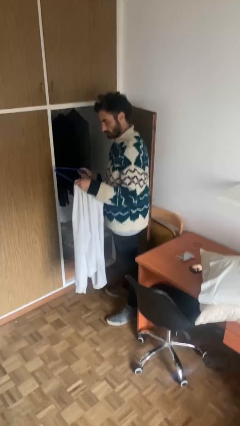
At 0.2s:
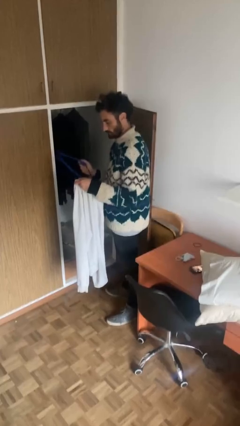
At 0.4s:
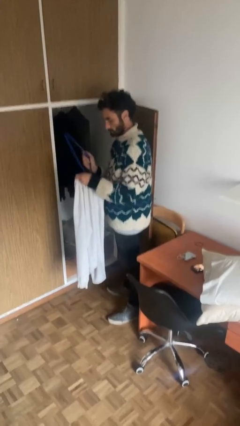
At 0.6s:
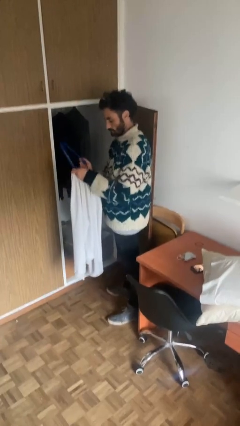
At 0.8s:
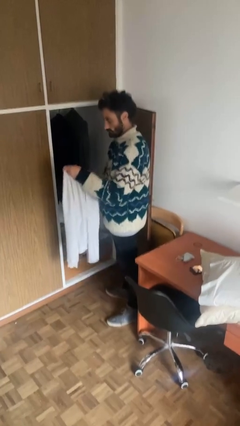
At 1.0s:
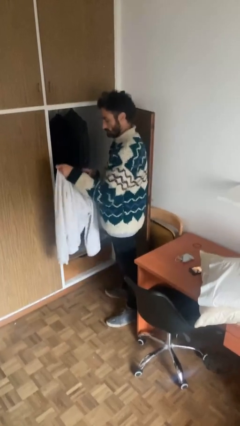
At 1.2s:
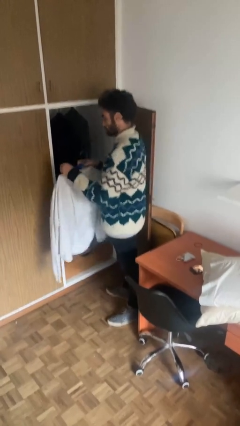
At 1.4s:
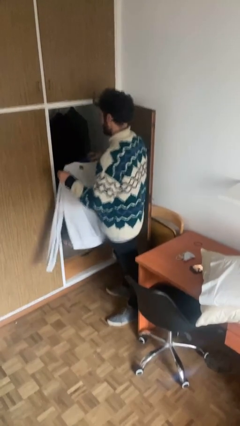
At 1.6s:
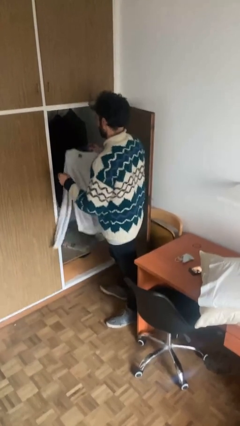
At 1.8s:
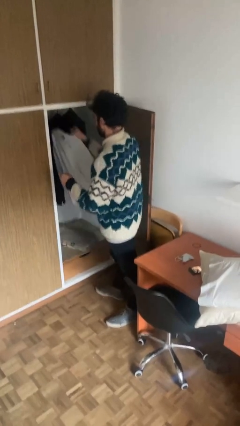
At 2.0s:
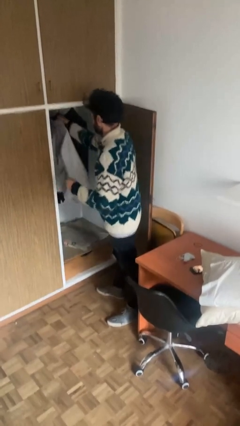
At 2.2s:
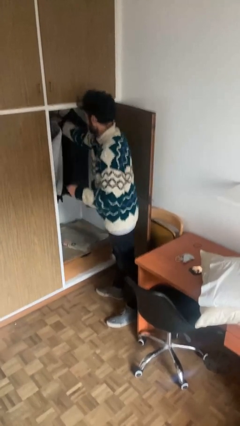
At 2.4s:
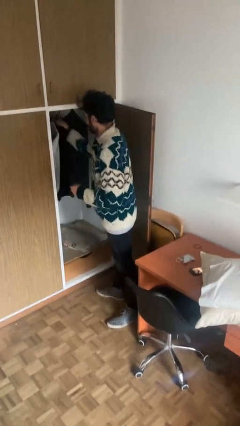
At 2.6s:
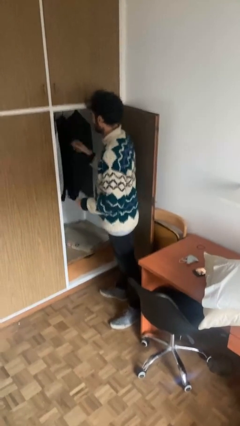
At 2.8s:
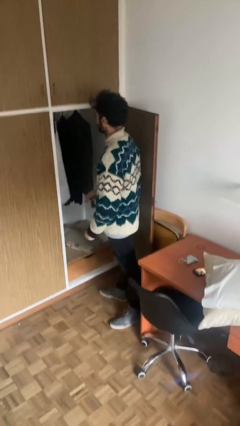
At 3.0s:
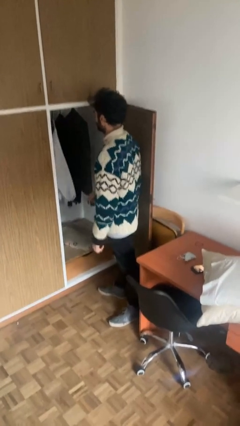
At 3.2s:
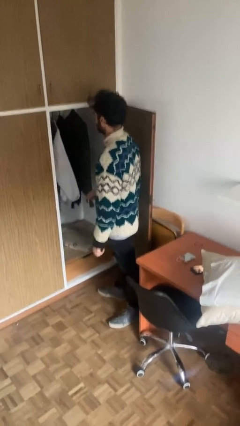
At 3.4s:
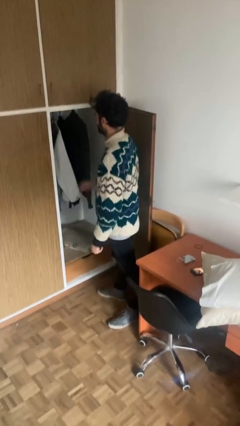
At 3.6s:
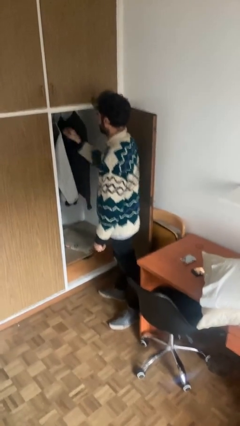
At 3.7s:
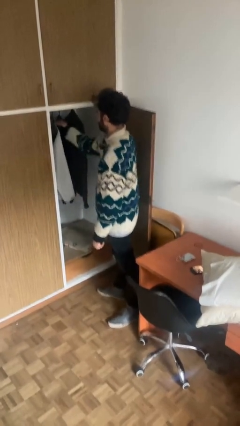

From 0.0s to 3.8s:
person puts clothes into closet

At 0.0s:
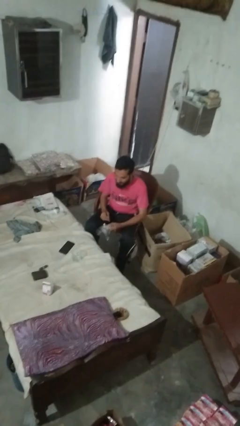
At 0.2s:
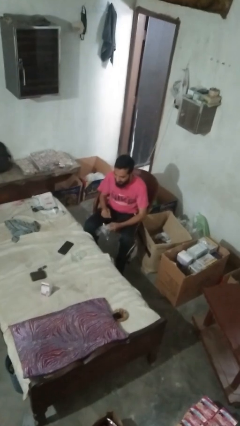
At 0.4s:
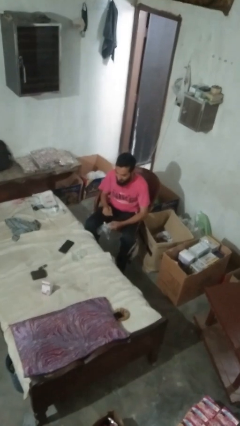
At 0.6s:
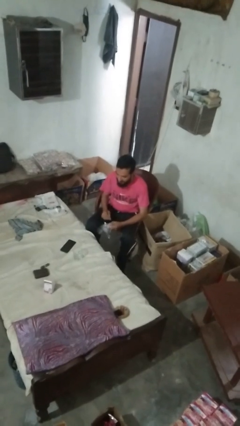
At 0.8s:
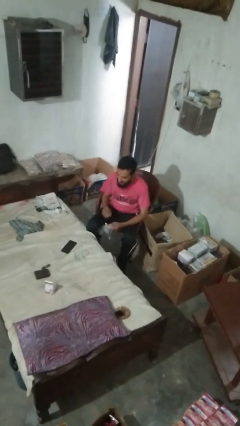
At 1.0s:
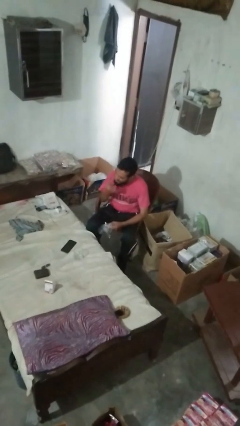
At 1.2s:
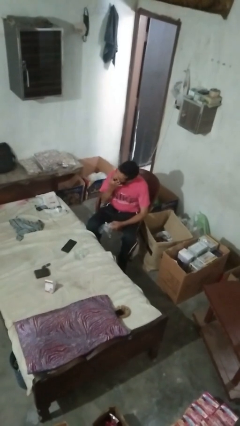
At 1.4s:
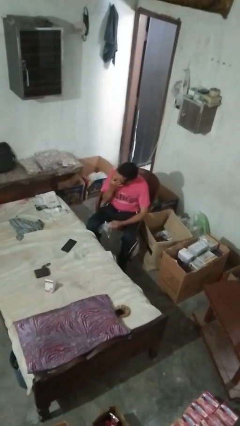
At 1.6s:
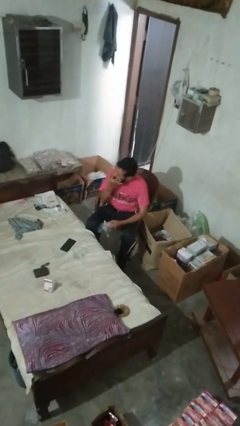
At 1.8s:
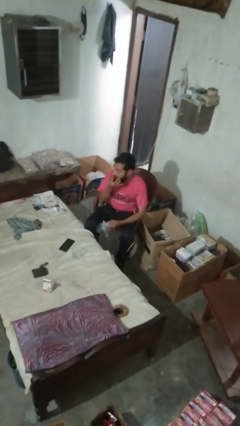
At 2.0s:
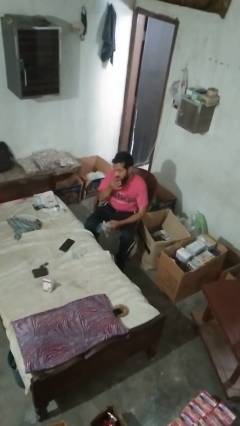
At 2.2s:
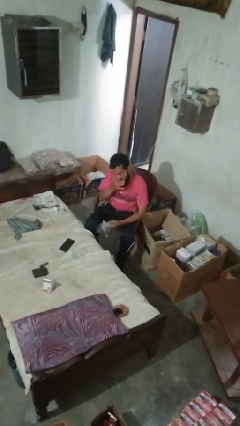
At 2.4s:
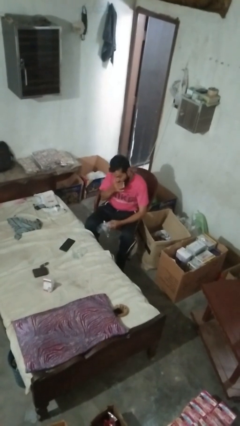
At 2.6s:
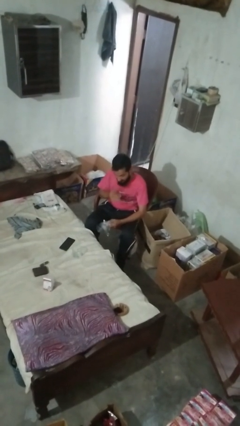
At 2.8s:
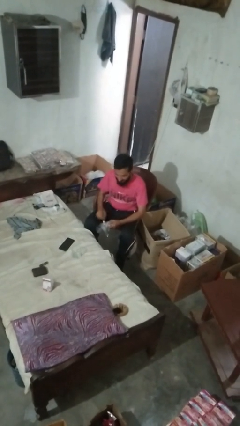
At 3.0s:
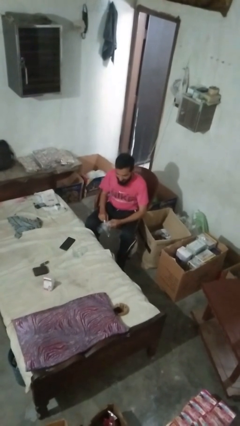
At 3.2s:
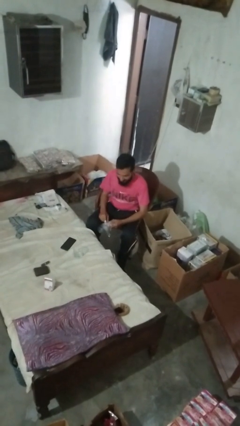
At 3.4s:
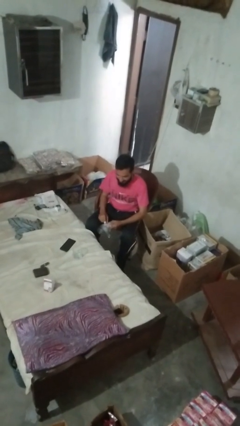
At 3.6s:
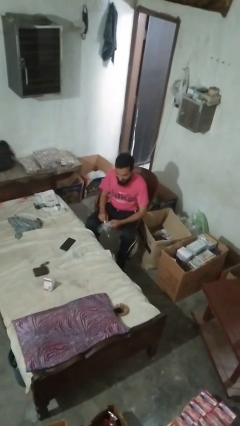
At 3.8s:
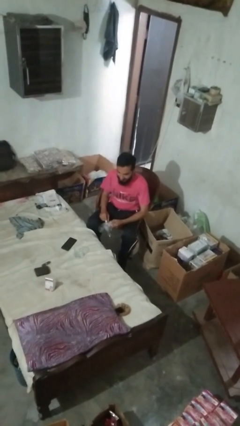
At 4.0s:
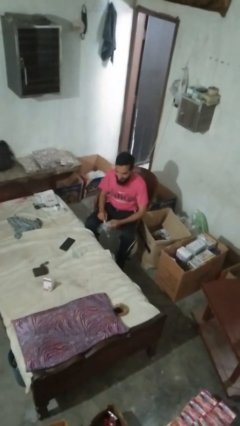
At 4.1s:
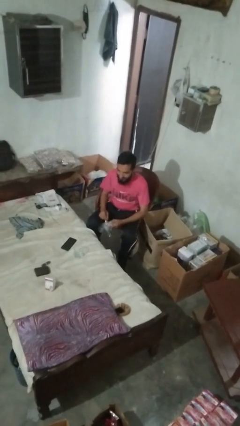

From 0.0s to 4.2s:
person licks fingers

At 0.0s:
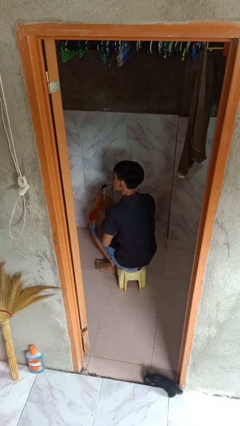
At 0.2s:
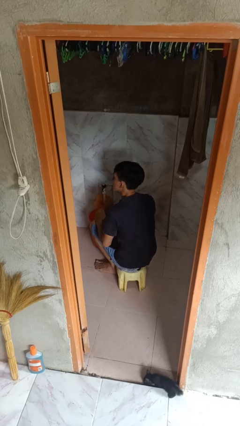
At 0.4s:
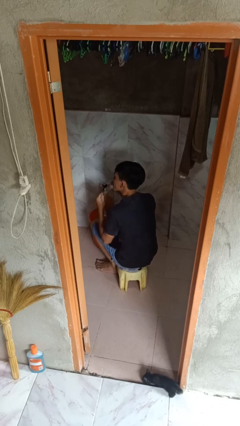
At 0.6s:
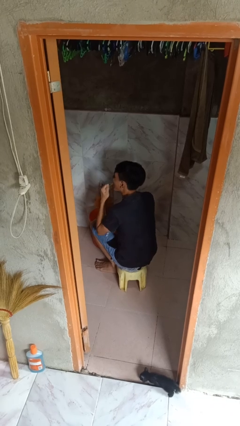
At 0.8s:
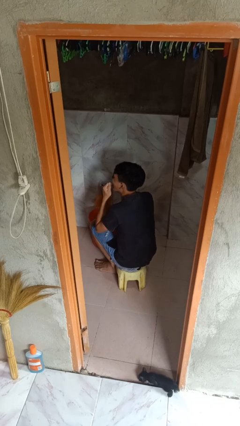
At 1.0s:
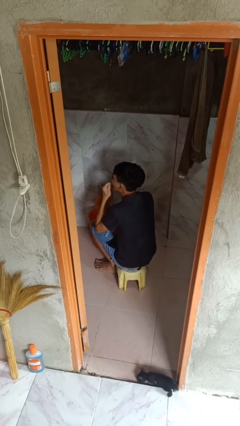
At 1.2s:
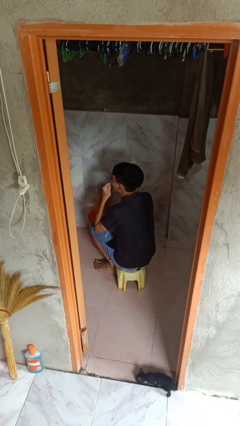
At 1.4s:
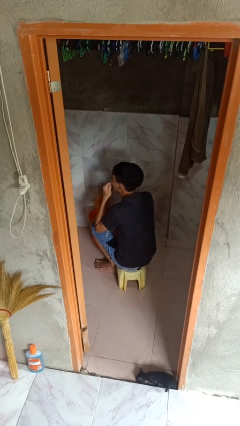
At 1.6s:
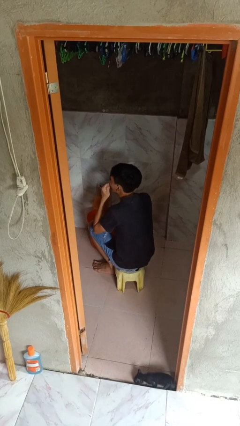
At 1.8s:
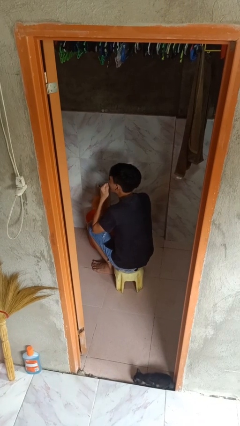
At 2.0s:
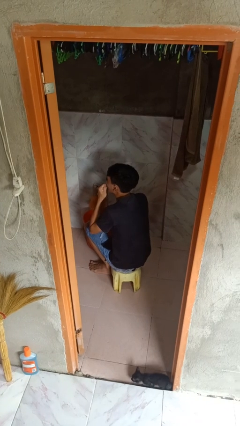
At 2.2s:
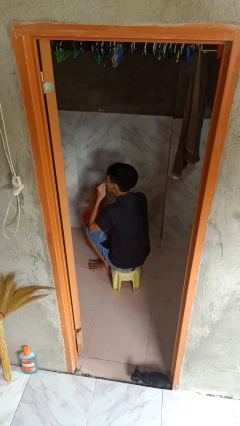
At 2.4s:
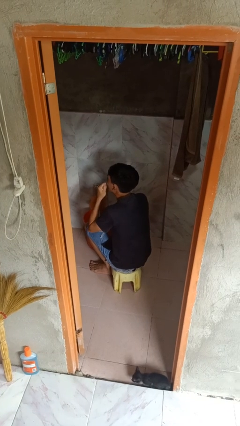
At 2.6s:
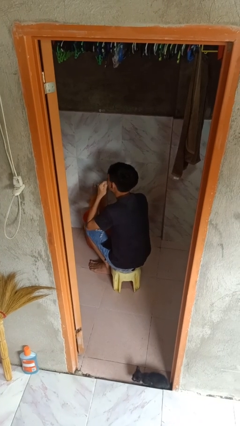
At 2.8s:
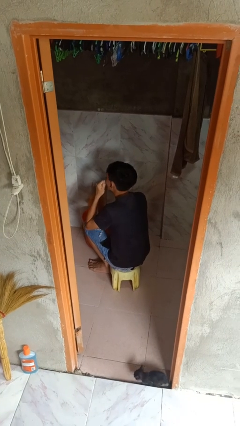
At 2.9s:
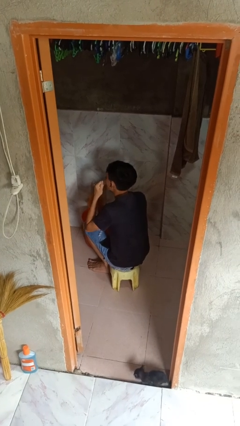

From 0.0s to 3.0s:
person flosses

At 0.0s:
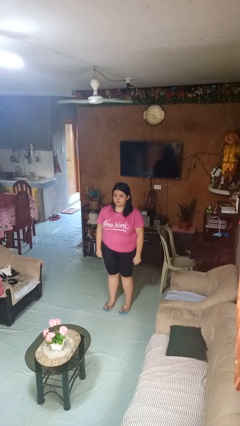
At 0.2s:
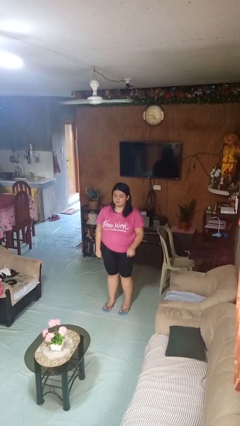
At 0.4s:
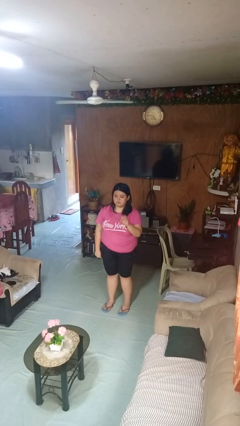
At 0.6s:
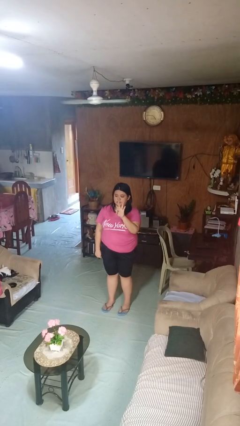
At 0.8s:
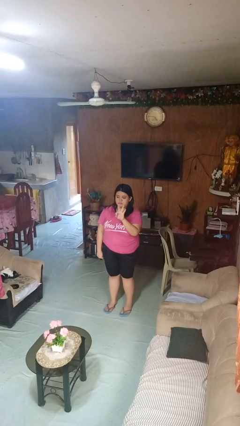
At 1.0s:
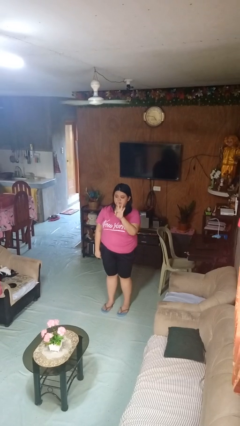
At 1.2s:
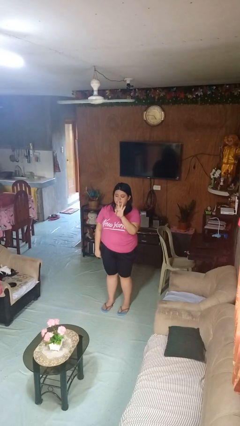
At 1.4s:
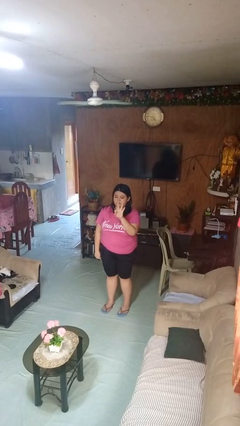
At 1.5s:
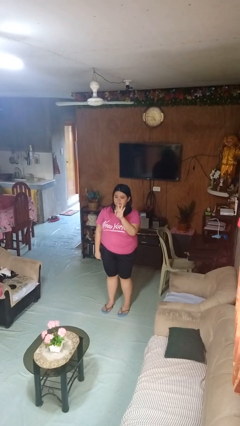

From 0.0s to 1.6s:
person gestures number three

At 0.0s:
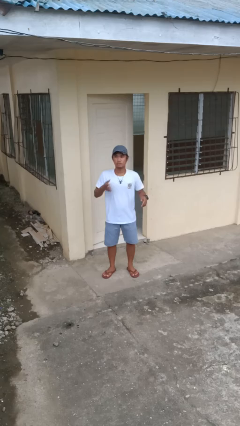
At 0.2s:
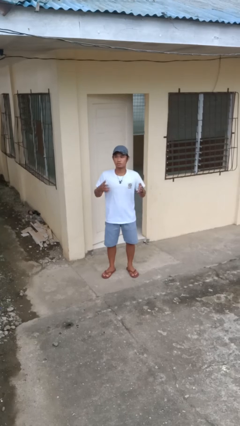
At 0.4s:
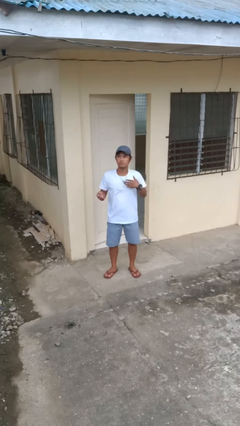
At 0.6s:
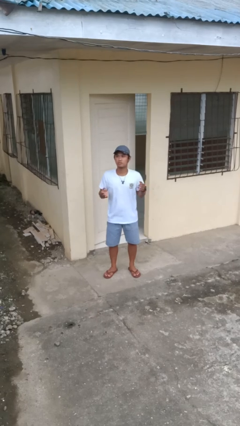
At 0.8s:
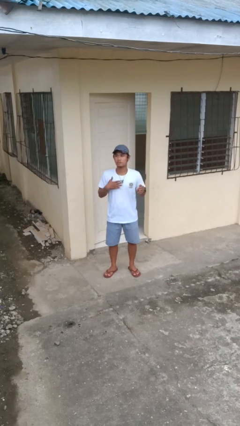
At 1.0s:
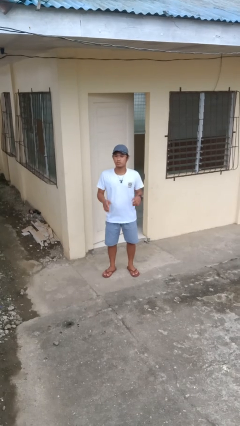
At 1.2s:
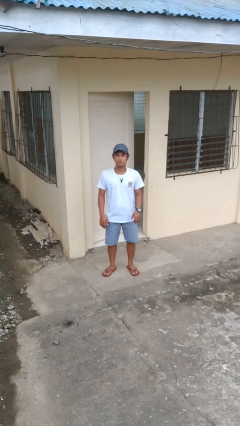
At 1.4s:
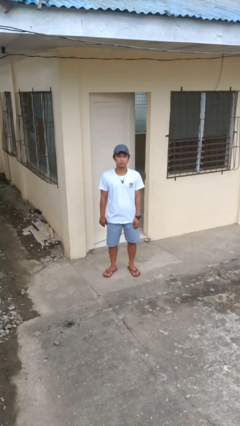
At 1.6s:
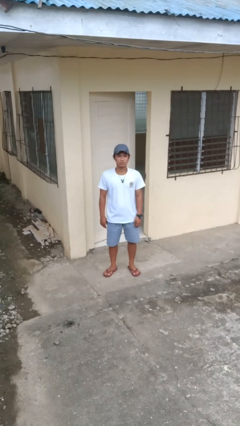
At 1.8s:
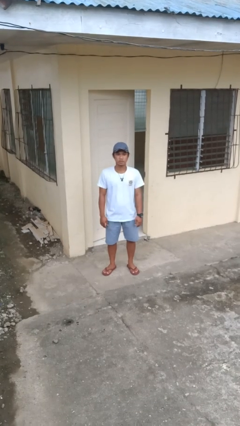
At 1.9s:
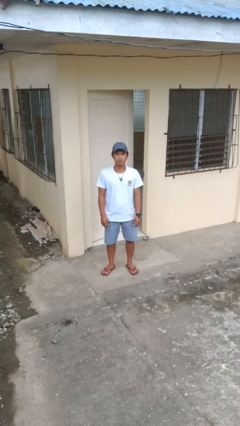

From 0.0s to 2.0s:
person drums on chest

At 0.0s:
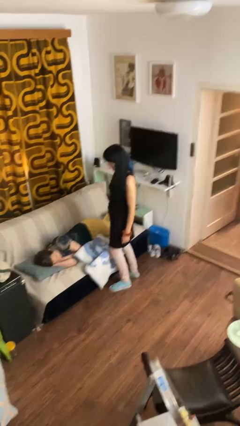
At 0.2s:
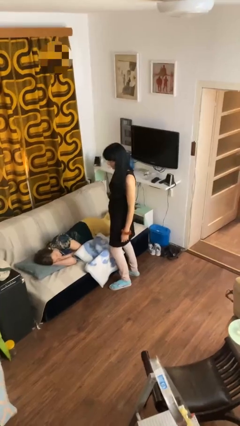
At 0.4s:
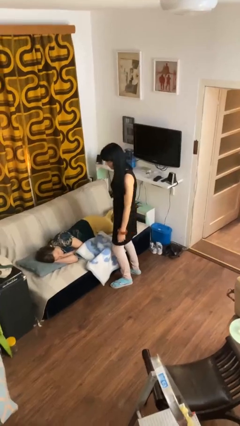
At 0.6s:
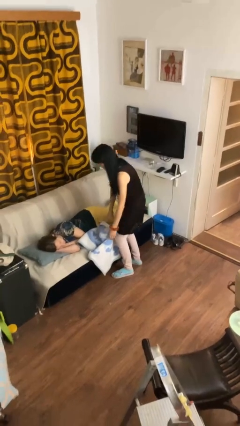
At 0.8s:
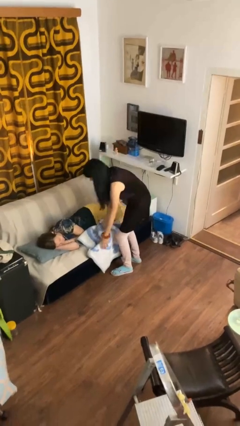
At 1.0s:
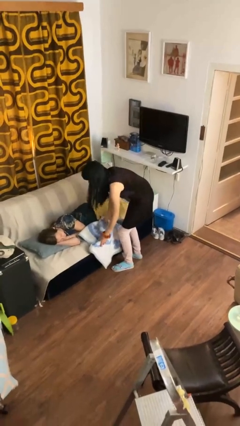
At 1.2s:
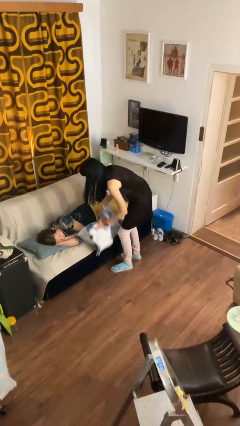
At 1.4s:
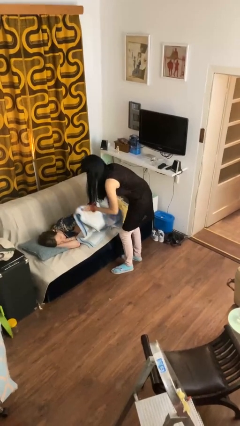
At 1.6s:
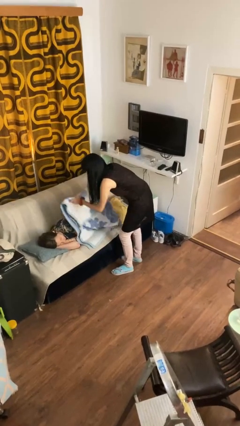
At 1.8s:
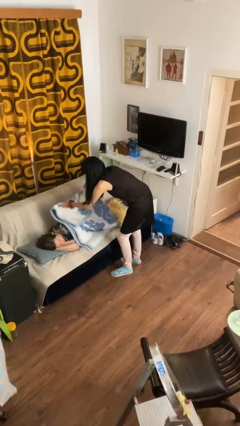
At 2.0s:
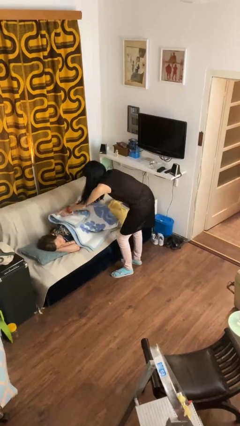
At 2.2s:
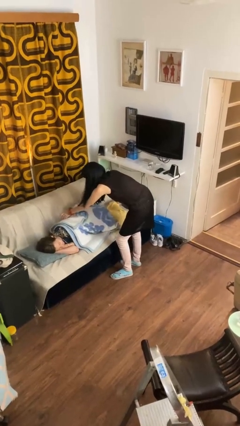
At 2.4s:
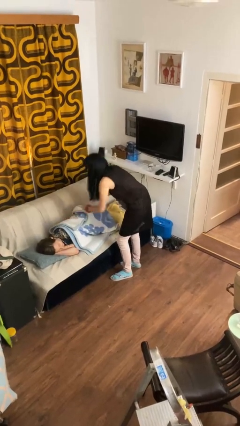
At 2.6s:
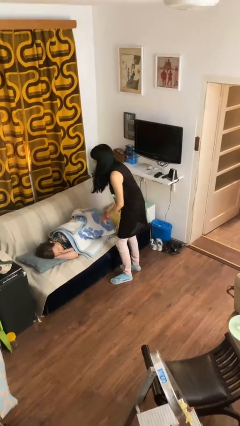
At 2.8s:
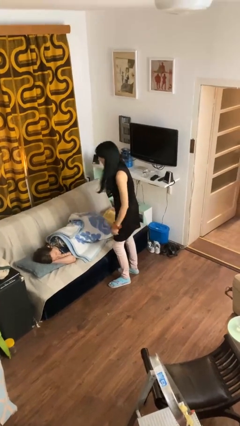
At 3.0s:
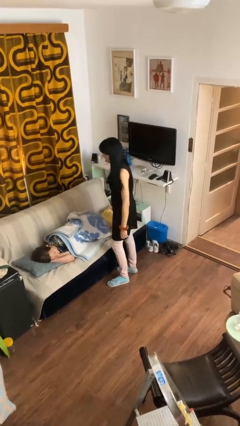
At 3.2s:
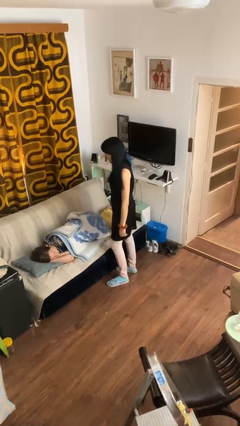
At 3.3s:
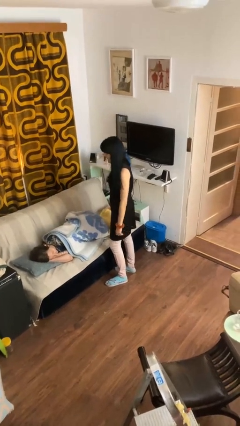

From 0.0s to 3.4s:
person covers friend with blanket
